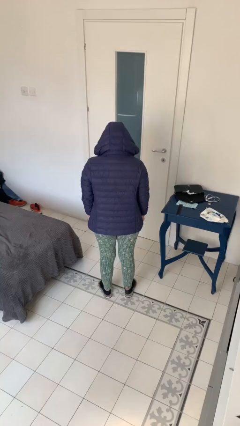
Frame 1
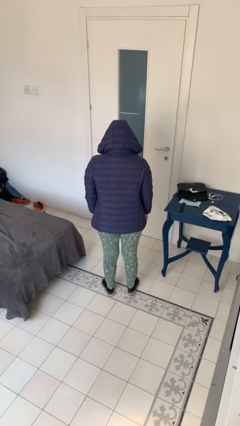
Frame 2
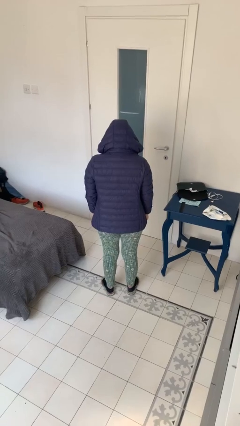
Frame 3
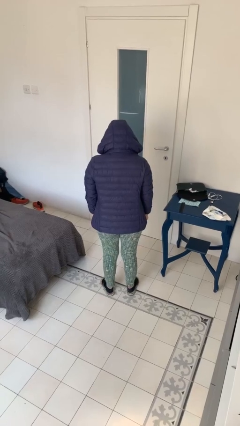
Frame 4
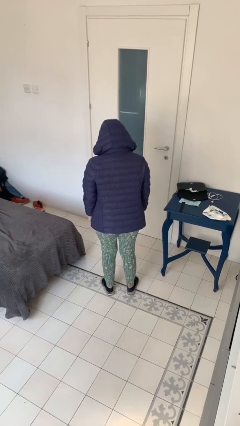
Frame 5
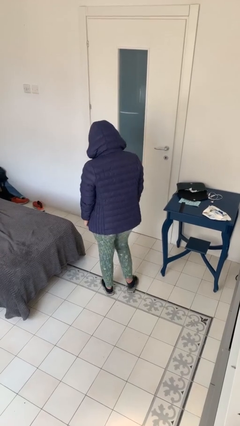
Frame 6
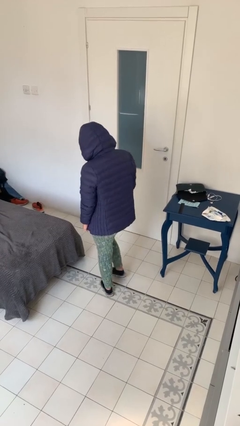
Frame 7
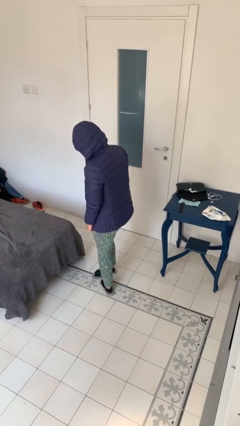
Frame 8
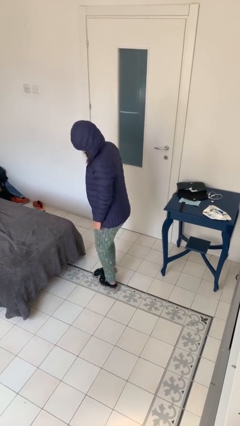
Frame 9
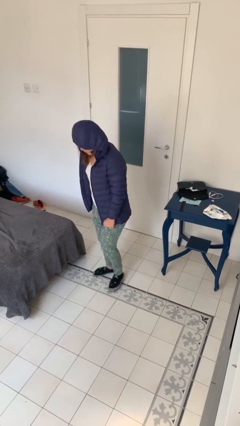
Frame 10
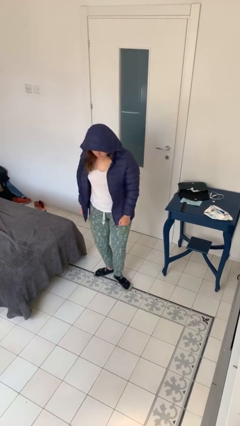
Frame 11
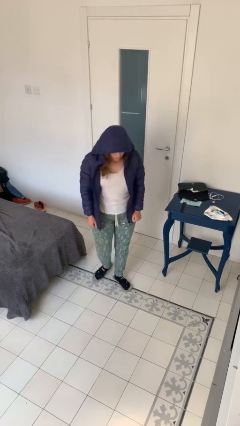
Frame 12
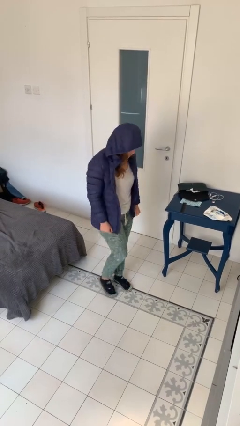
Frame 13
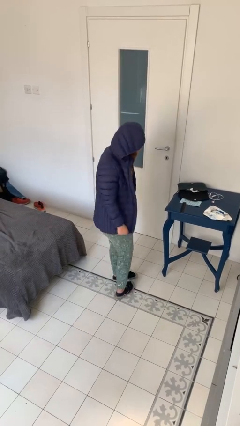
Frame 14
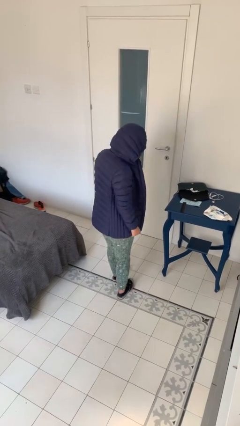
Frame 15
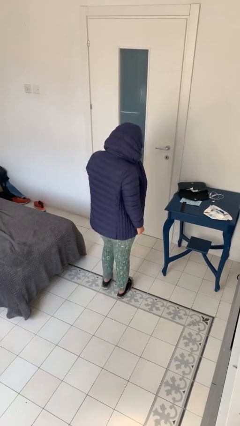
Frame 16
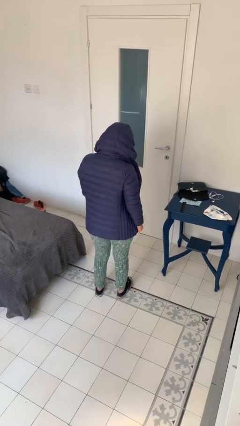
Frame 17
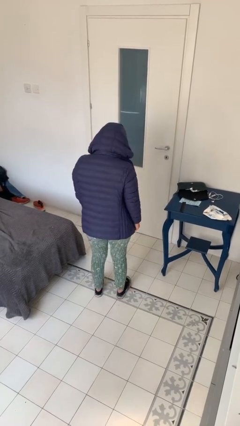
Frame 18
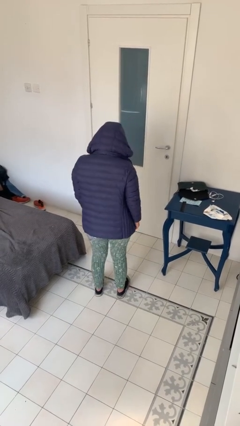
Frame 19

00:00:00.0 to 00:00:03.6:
person twirls

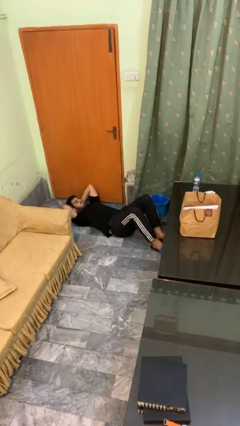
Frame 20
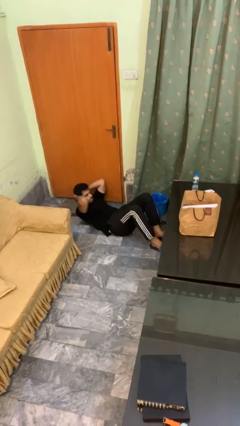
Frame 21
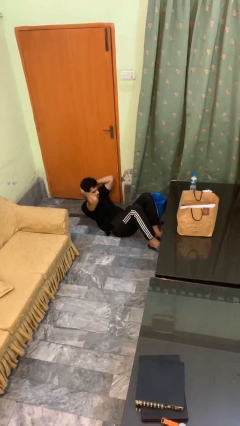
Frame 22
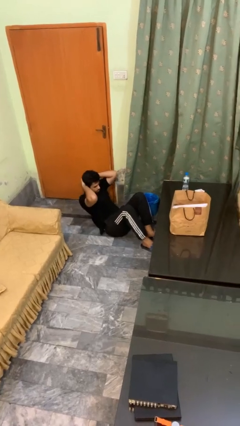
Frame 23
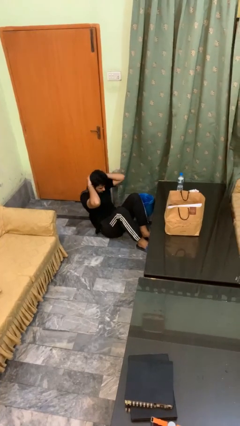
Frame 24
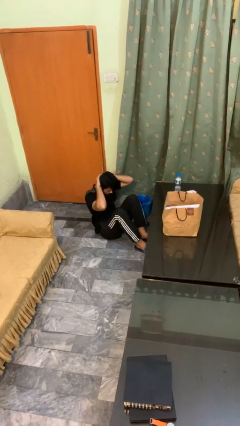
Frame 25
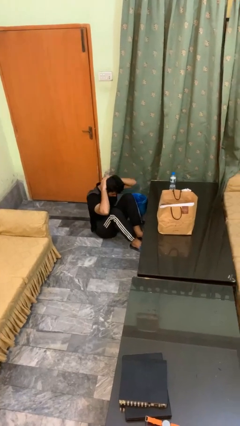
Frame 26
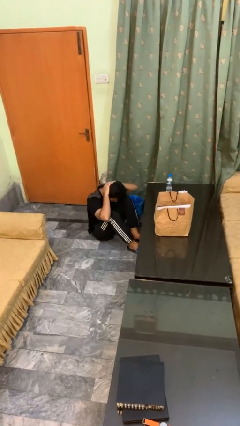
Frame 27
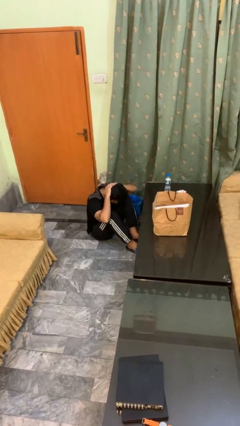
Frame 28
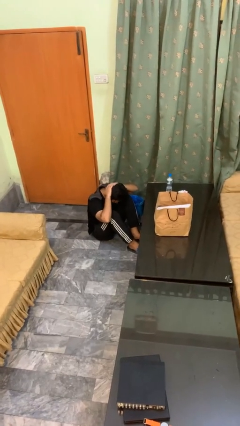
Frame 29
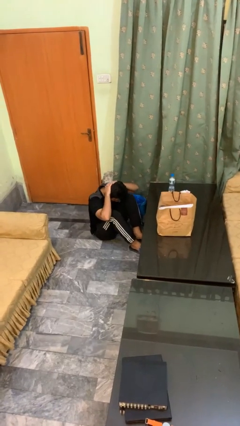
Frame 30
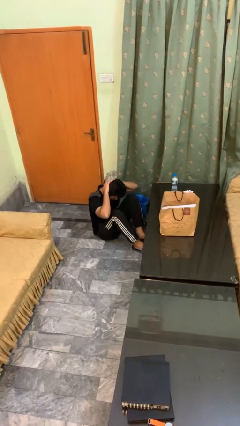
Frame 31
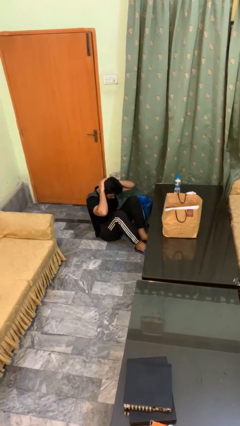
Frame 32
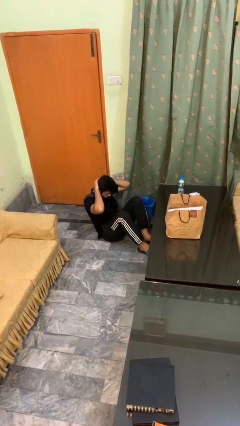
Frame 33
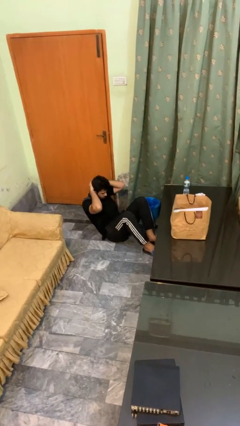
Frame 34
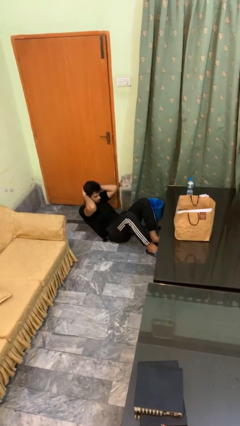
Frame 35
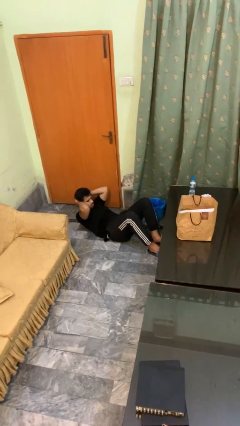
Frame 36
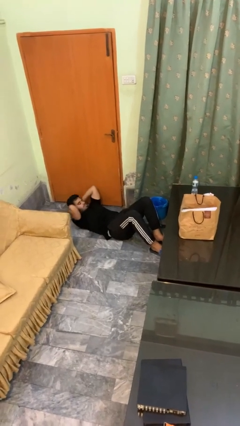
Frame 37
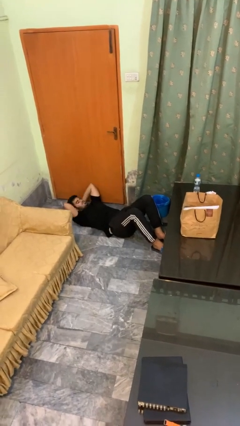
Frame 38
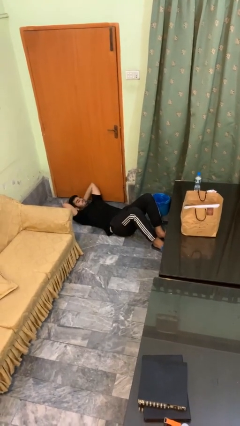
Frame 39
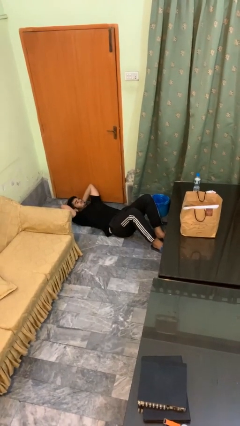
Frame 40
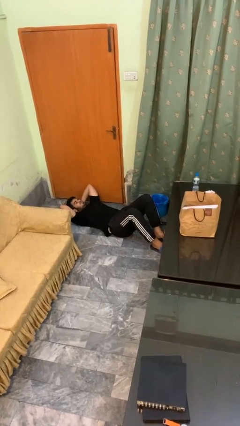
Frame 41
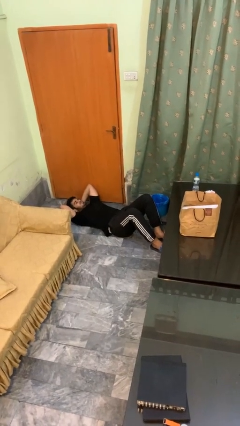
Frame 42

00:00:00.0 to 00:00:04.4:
person exercises with situp

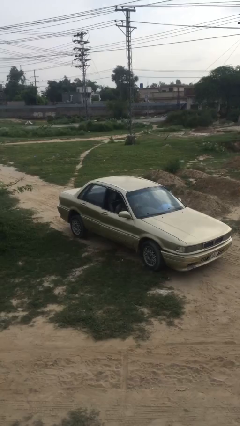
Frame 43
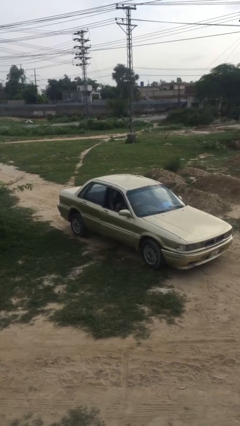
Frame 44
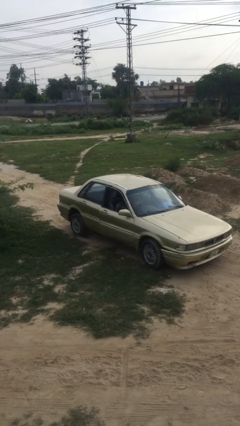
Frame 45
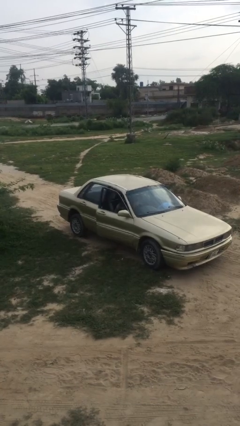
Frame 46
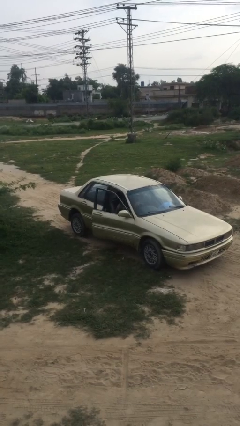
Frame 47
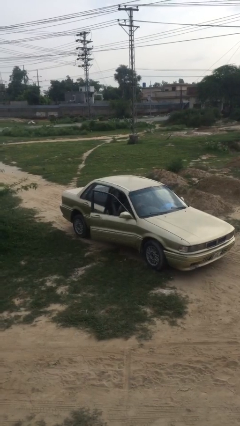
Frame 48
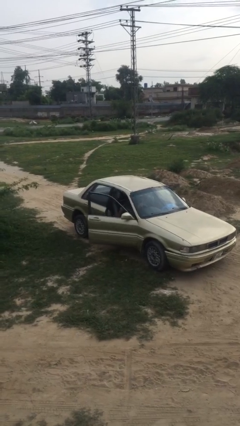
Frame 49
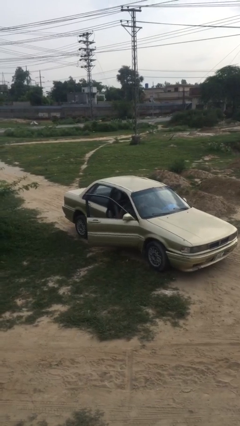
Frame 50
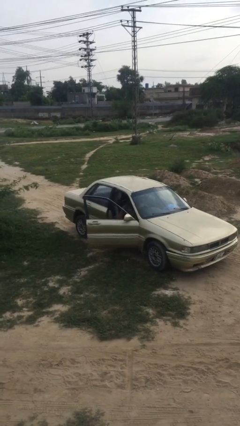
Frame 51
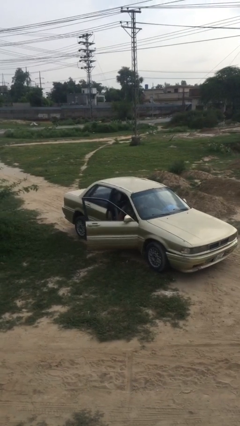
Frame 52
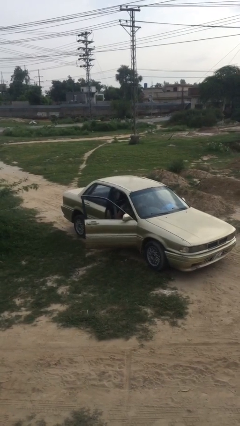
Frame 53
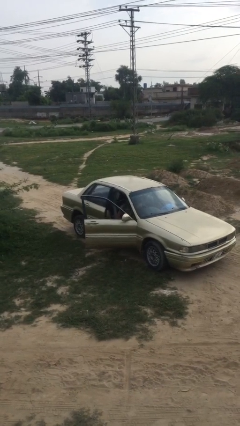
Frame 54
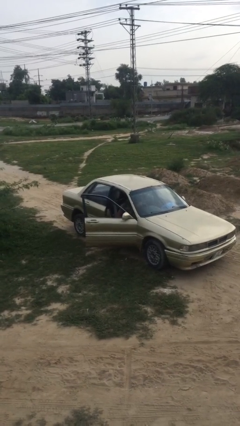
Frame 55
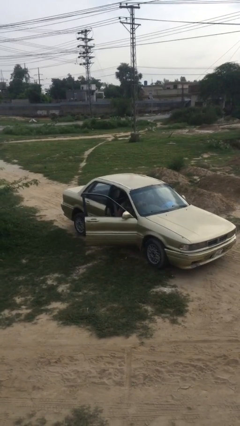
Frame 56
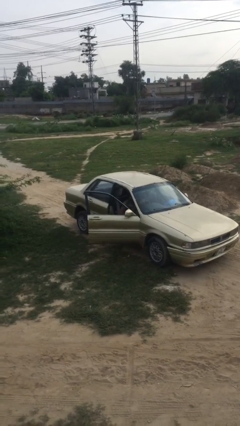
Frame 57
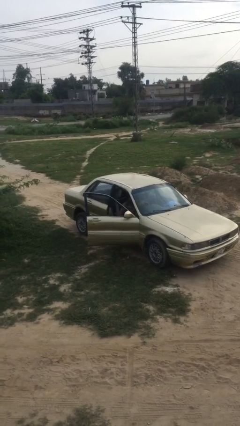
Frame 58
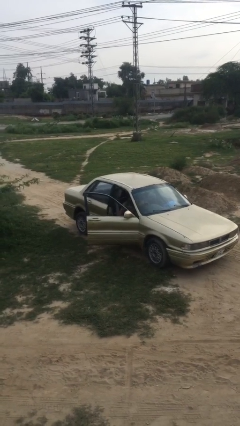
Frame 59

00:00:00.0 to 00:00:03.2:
person opens car door

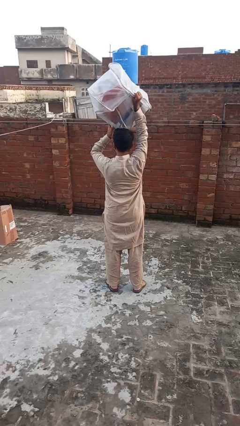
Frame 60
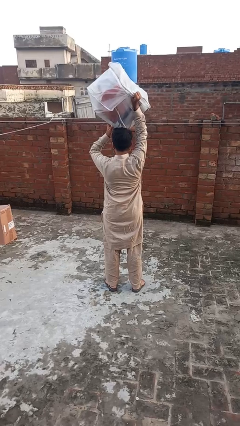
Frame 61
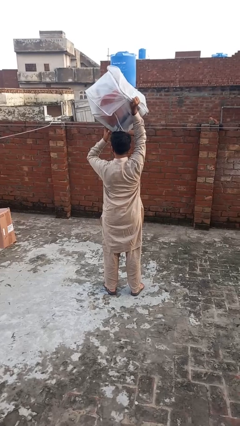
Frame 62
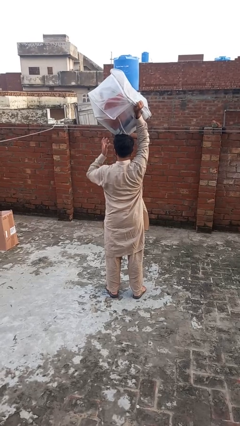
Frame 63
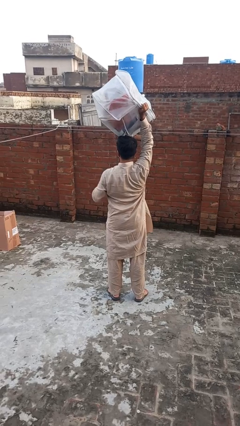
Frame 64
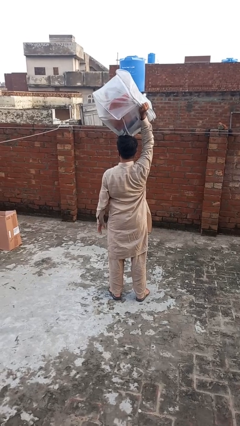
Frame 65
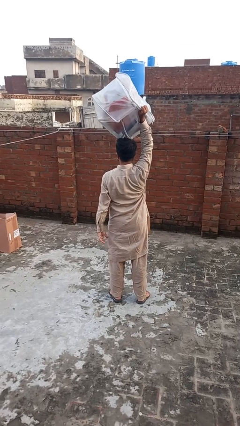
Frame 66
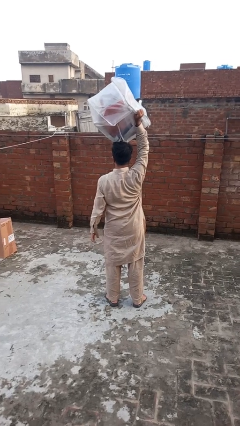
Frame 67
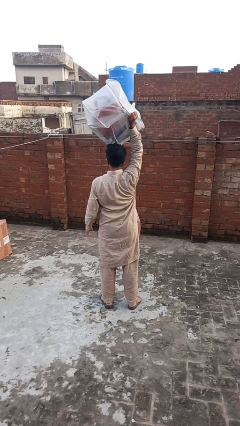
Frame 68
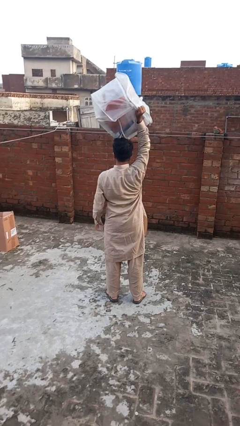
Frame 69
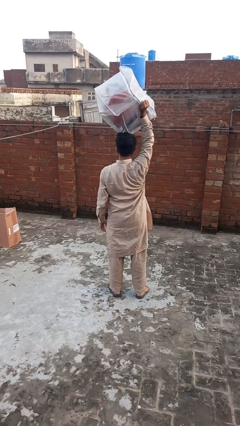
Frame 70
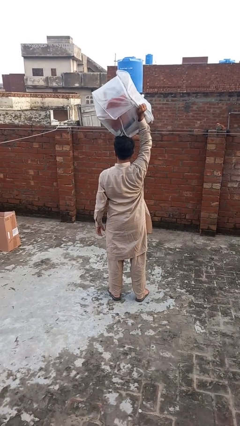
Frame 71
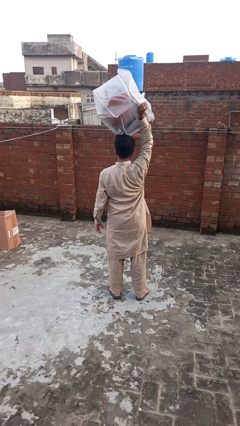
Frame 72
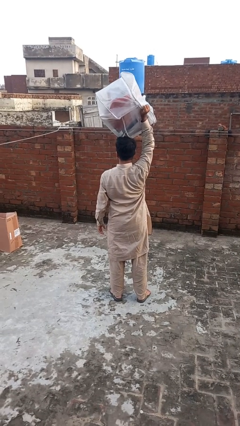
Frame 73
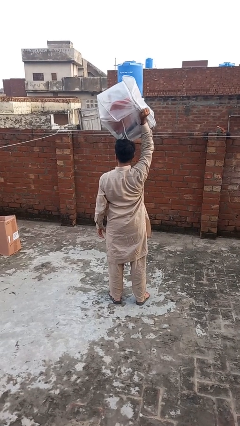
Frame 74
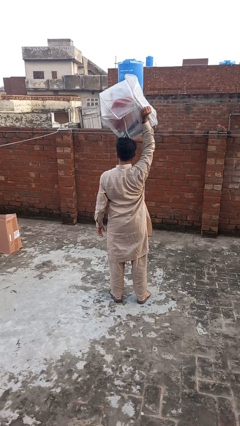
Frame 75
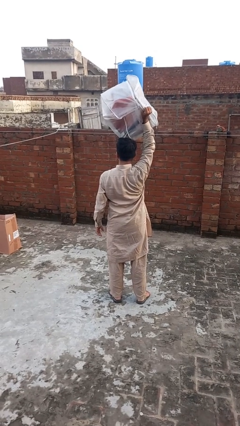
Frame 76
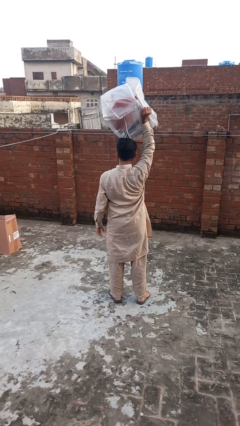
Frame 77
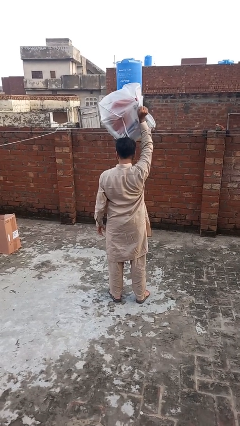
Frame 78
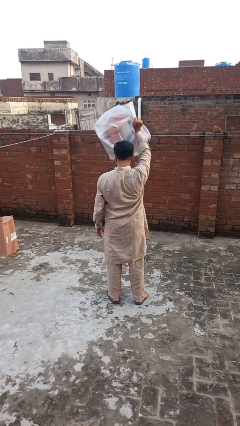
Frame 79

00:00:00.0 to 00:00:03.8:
person holds object above head

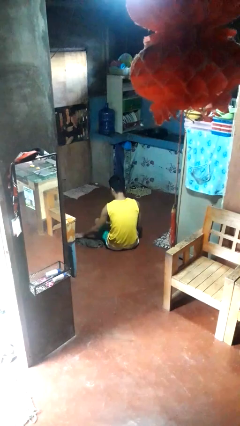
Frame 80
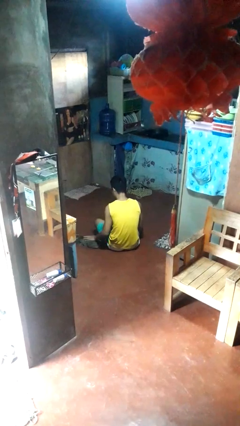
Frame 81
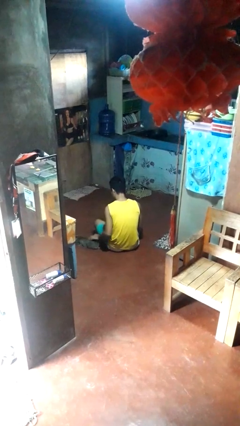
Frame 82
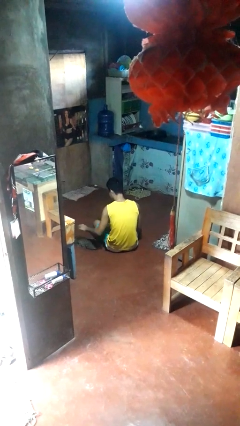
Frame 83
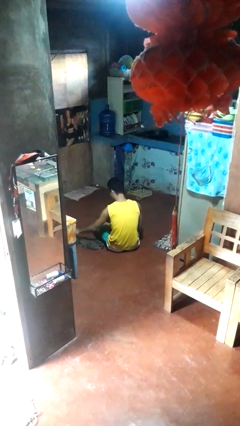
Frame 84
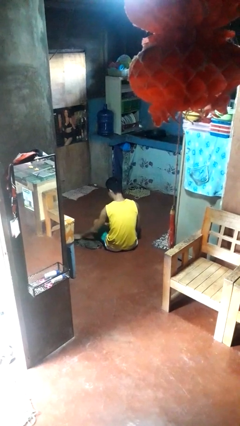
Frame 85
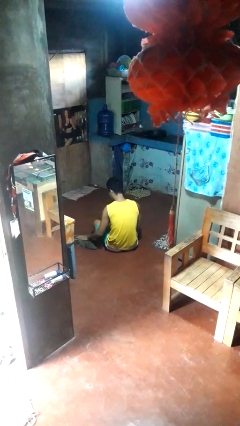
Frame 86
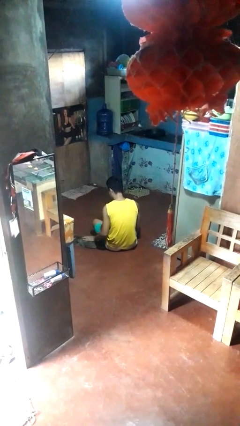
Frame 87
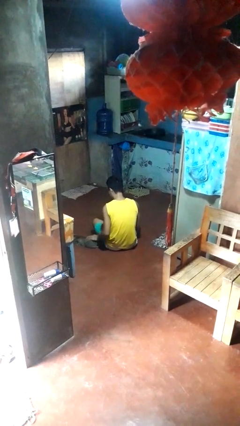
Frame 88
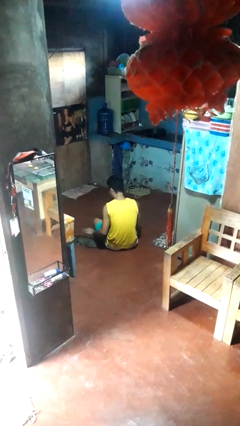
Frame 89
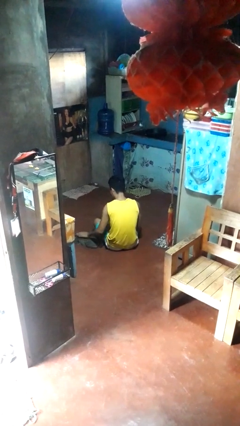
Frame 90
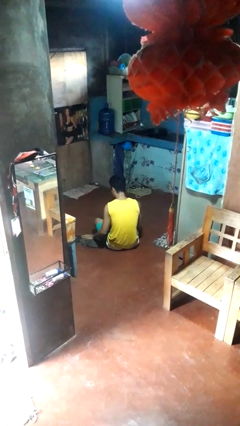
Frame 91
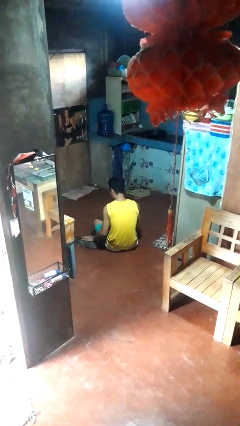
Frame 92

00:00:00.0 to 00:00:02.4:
person pets cat

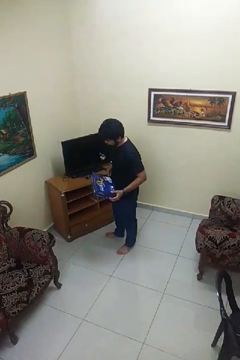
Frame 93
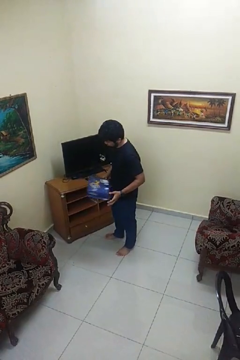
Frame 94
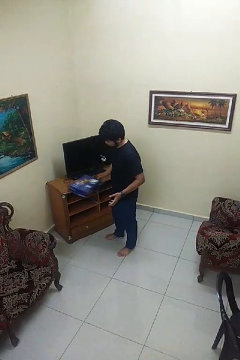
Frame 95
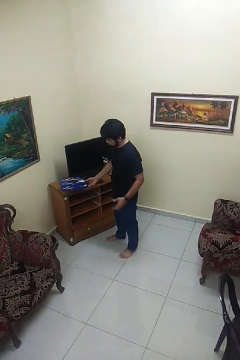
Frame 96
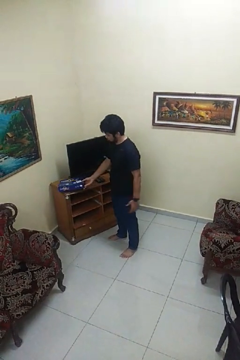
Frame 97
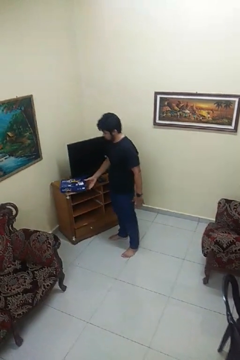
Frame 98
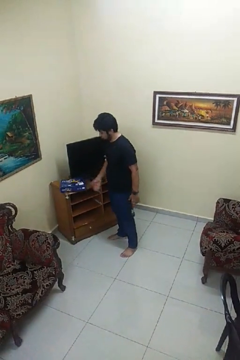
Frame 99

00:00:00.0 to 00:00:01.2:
person puts down object on countertop
